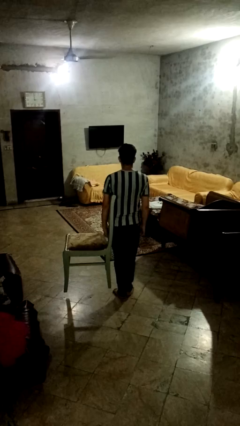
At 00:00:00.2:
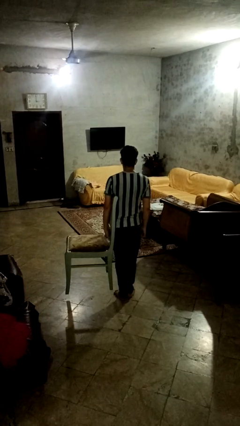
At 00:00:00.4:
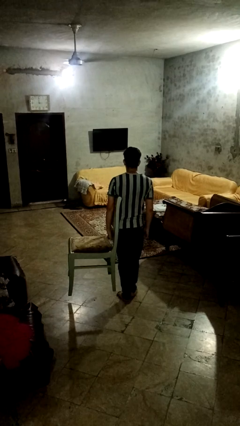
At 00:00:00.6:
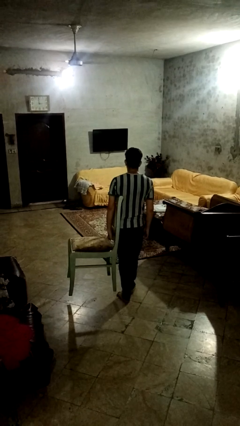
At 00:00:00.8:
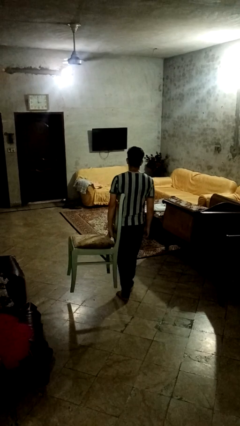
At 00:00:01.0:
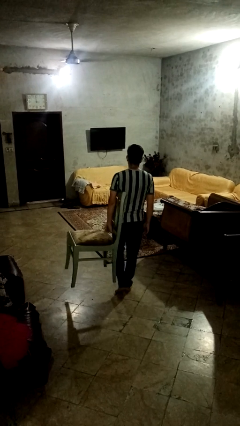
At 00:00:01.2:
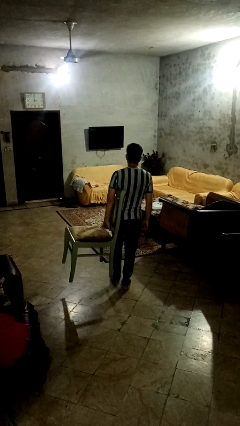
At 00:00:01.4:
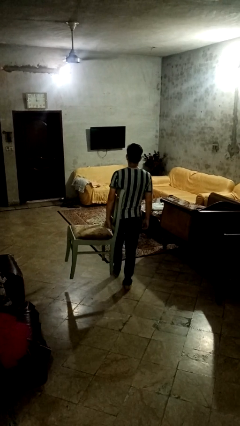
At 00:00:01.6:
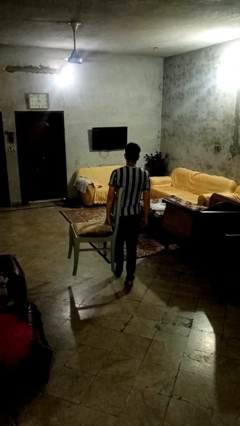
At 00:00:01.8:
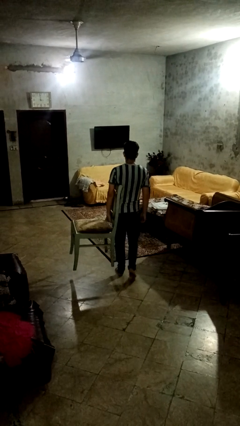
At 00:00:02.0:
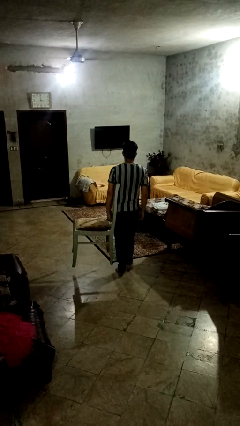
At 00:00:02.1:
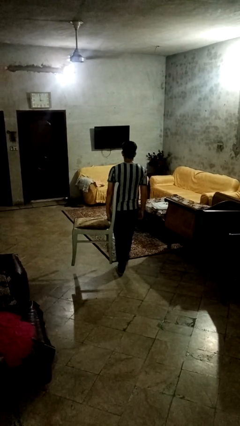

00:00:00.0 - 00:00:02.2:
person carries furniture

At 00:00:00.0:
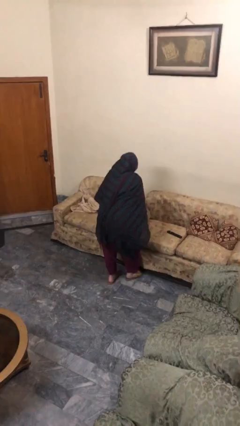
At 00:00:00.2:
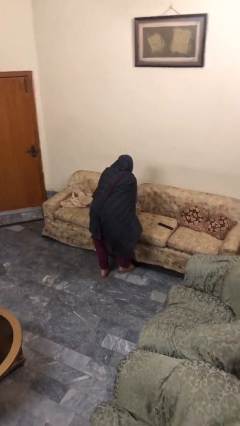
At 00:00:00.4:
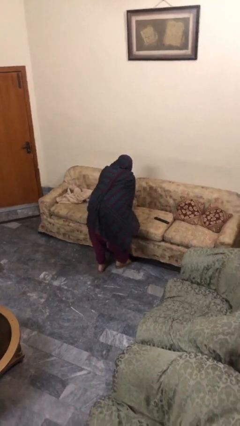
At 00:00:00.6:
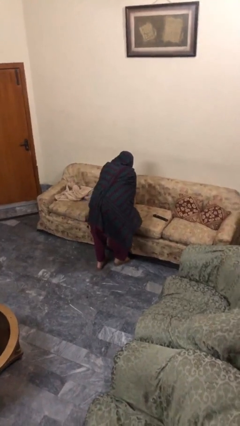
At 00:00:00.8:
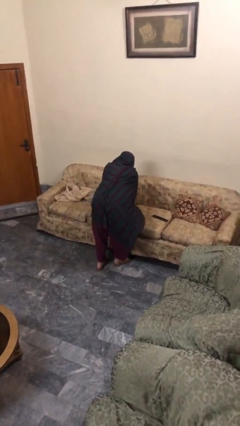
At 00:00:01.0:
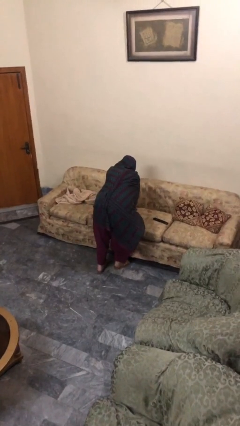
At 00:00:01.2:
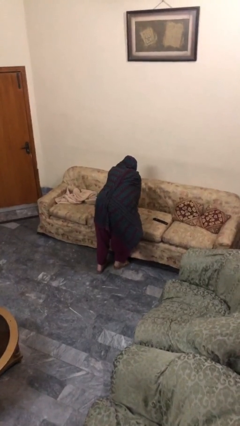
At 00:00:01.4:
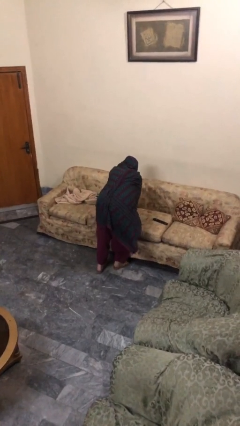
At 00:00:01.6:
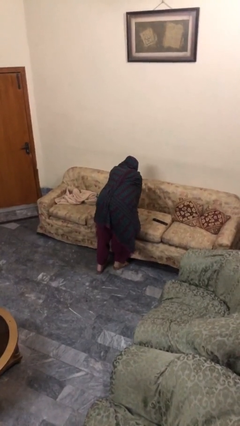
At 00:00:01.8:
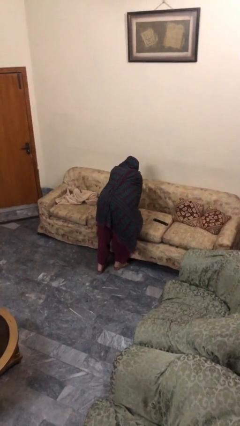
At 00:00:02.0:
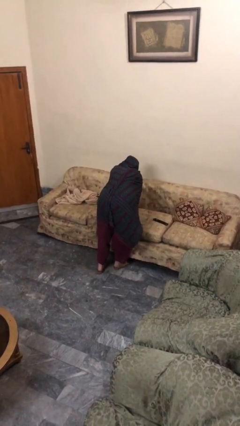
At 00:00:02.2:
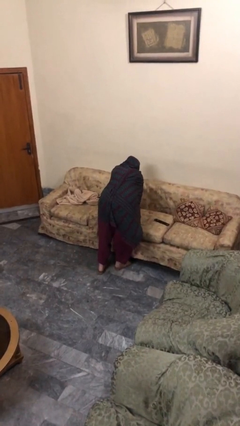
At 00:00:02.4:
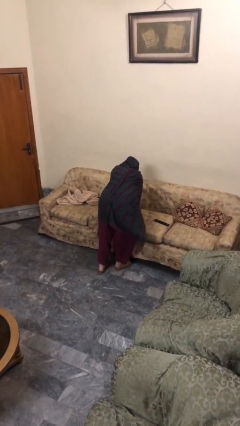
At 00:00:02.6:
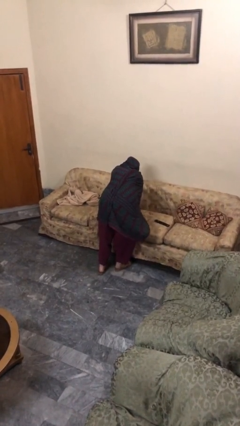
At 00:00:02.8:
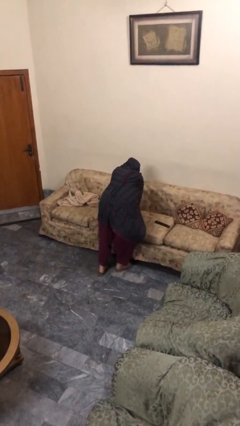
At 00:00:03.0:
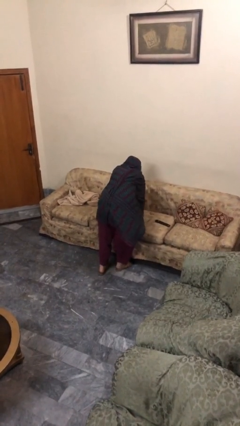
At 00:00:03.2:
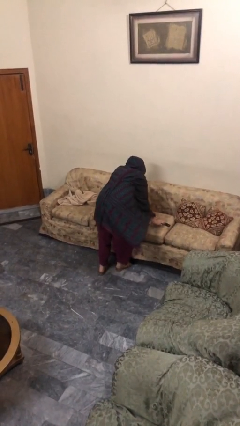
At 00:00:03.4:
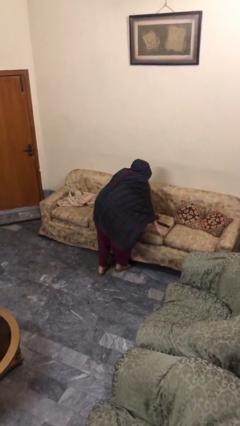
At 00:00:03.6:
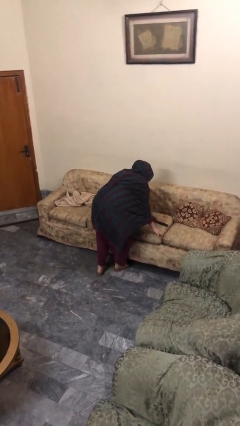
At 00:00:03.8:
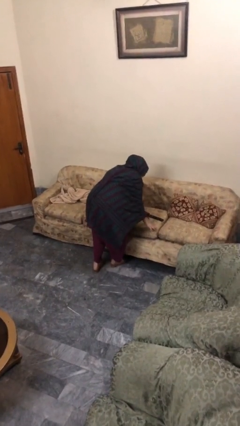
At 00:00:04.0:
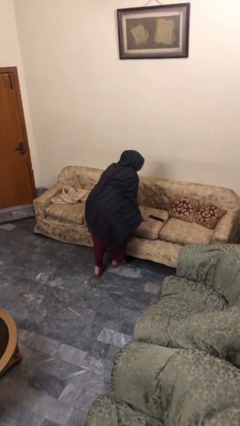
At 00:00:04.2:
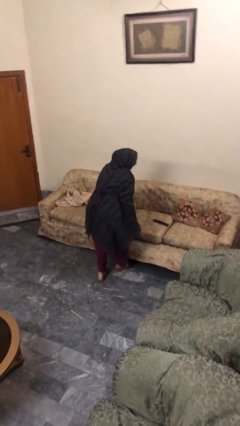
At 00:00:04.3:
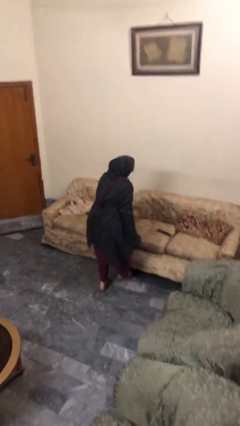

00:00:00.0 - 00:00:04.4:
person searches in couch

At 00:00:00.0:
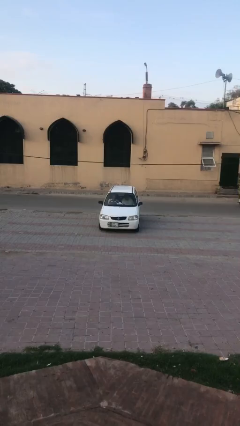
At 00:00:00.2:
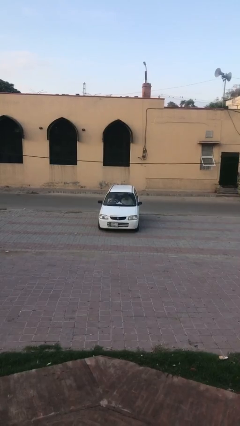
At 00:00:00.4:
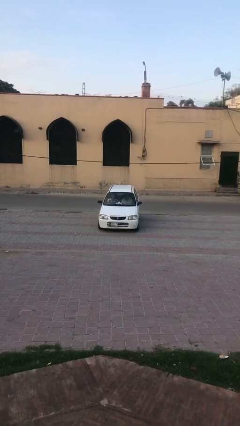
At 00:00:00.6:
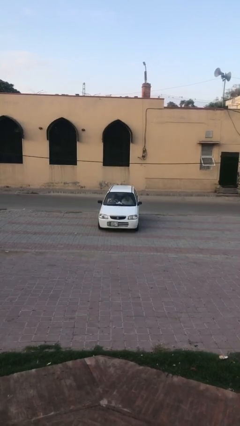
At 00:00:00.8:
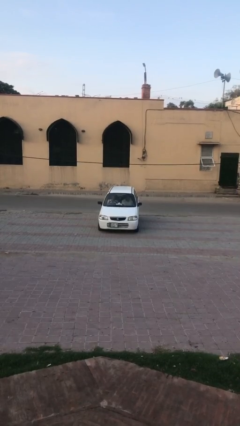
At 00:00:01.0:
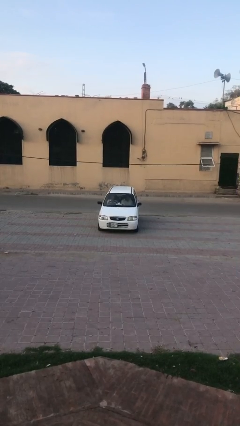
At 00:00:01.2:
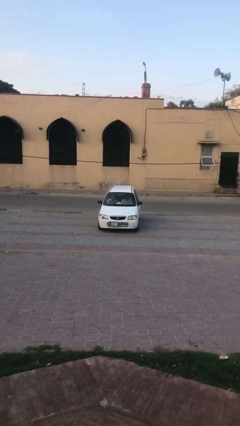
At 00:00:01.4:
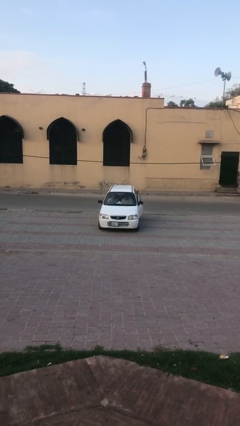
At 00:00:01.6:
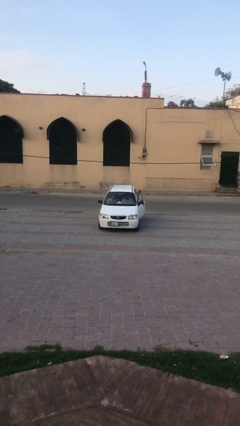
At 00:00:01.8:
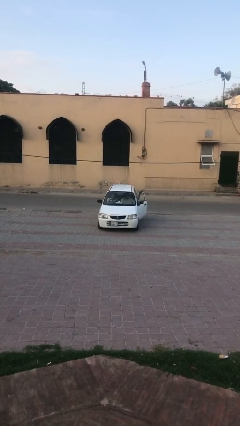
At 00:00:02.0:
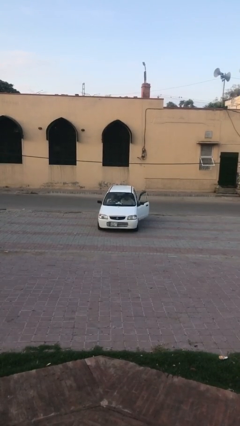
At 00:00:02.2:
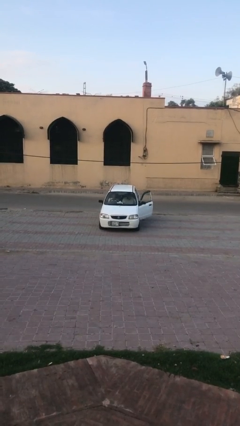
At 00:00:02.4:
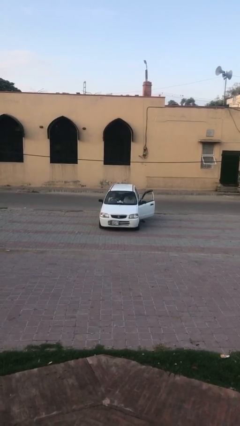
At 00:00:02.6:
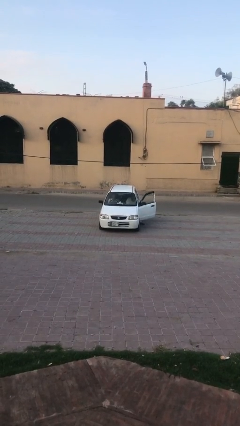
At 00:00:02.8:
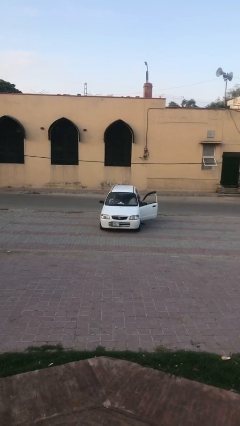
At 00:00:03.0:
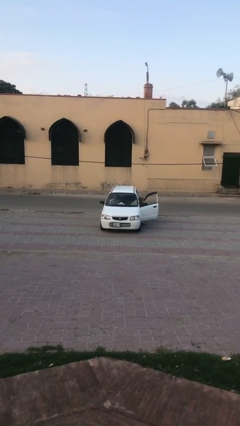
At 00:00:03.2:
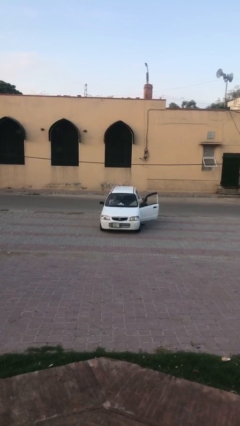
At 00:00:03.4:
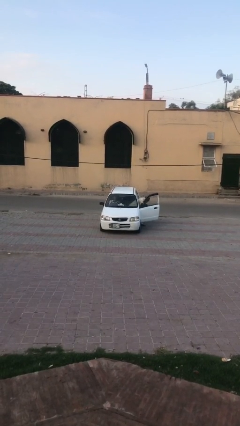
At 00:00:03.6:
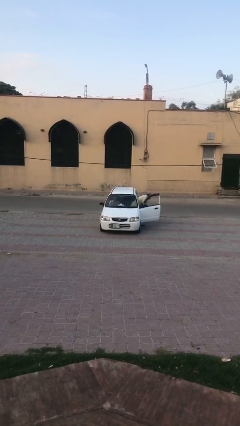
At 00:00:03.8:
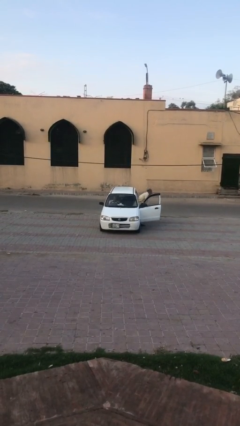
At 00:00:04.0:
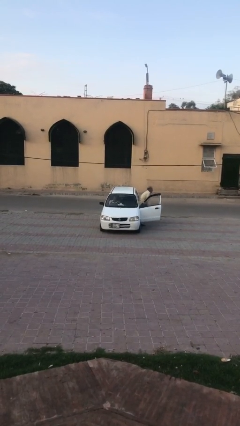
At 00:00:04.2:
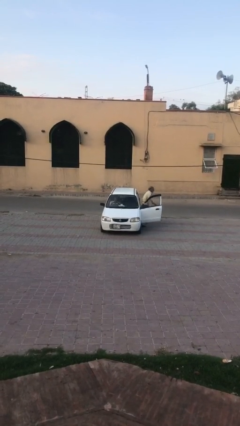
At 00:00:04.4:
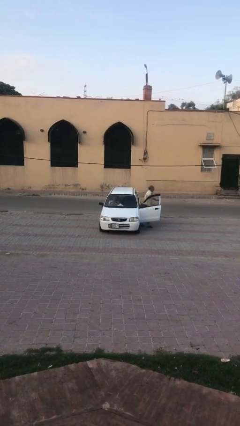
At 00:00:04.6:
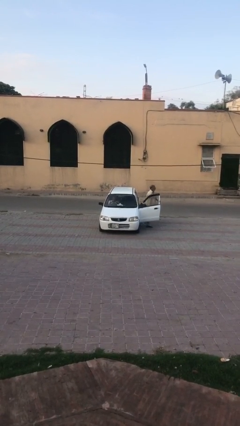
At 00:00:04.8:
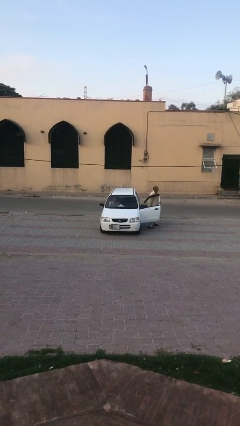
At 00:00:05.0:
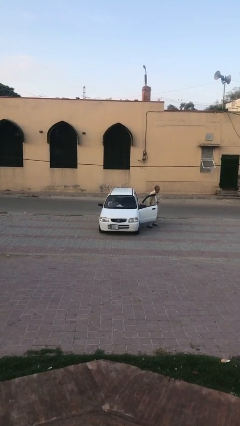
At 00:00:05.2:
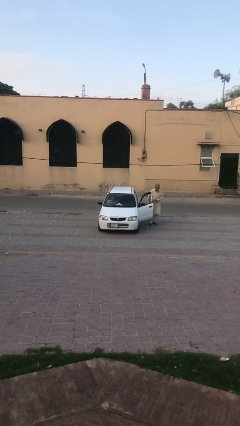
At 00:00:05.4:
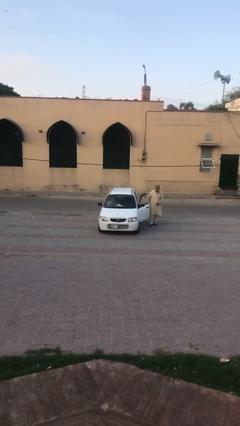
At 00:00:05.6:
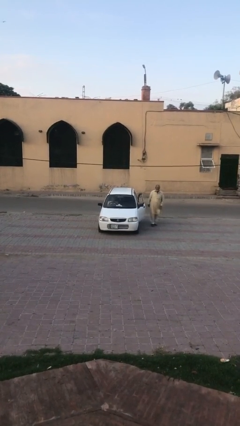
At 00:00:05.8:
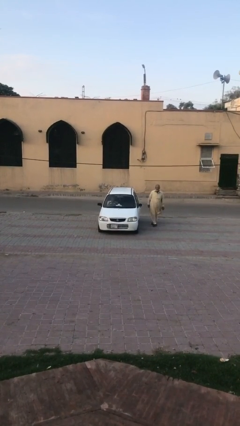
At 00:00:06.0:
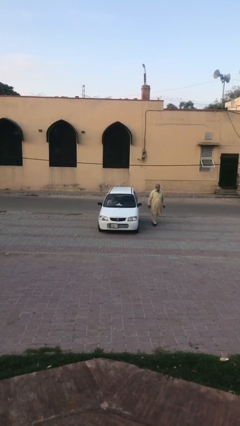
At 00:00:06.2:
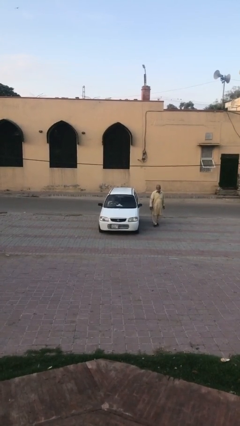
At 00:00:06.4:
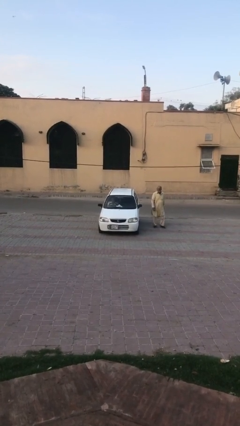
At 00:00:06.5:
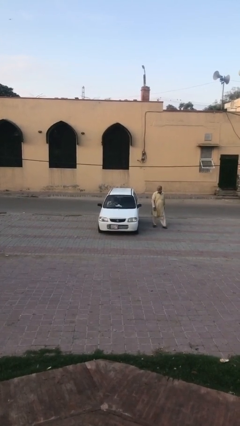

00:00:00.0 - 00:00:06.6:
car drops off person

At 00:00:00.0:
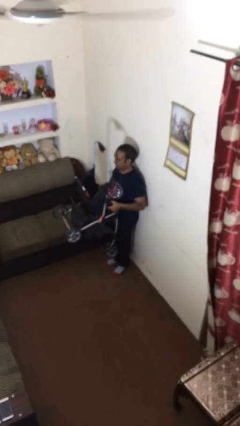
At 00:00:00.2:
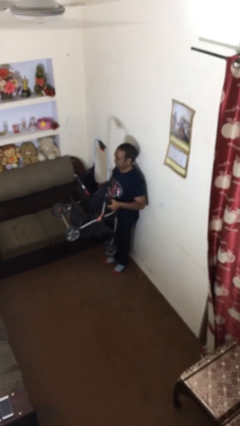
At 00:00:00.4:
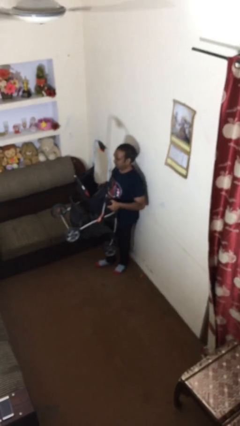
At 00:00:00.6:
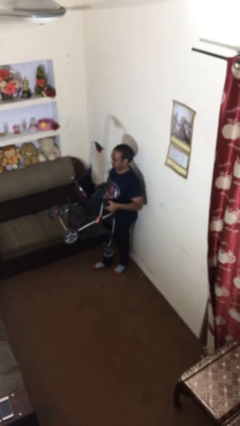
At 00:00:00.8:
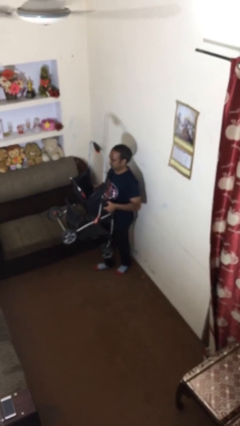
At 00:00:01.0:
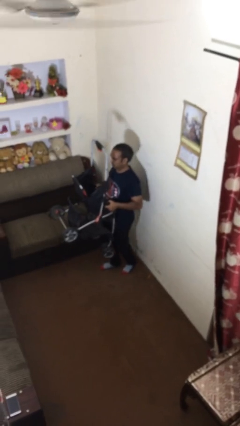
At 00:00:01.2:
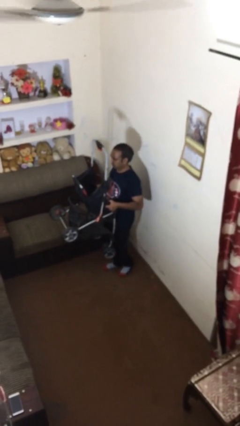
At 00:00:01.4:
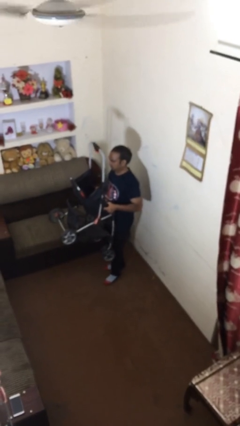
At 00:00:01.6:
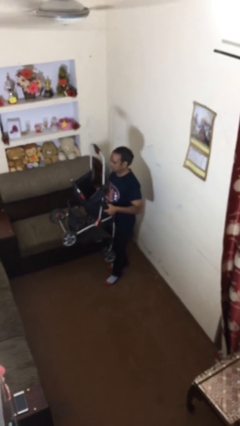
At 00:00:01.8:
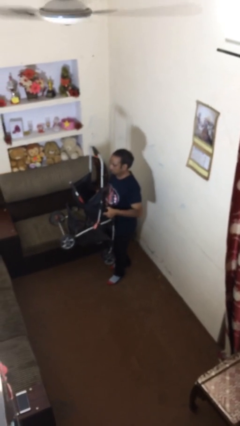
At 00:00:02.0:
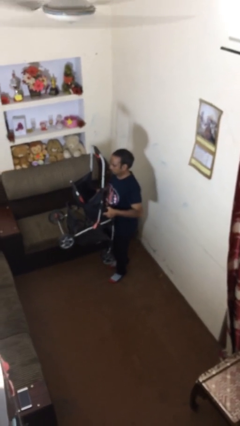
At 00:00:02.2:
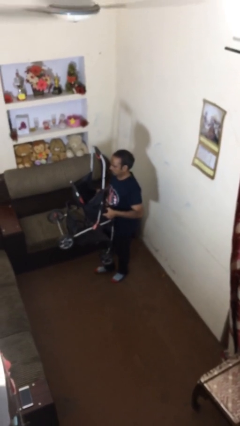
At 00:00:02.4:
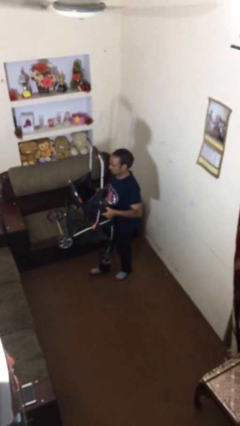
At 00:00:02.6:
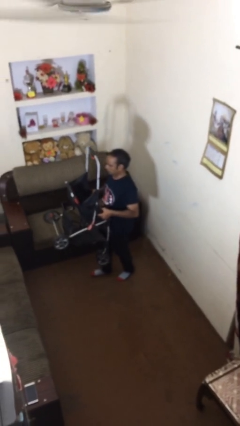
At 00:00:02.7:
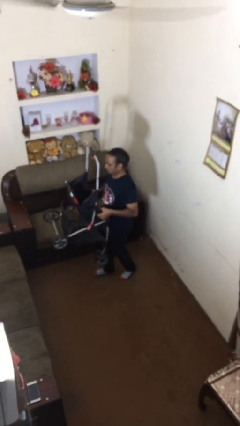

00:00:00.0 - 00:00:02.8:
person carries heavy object

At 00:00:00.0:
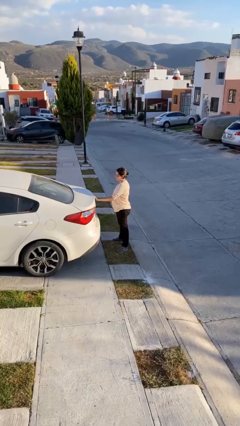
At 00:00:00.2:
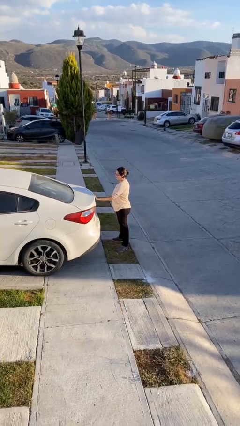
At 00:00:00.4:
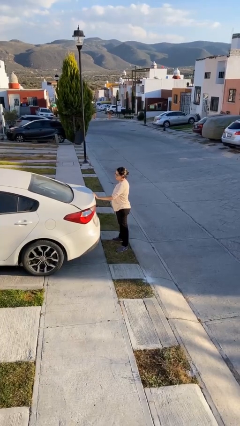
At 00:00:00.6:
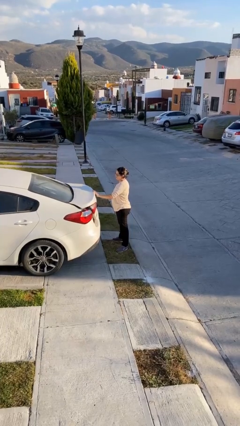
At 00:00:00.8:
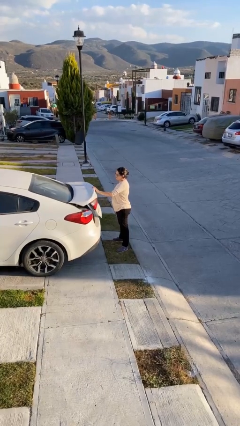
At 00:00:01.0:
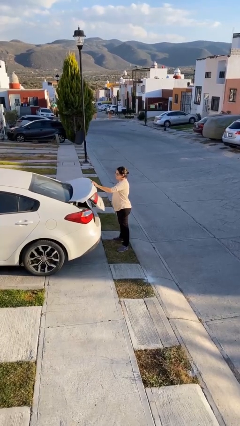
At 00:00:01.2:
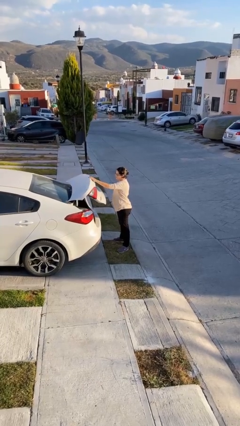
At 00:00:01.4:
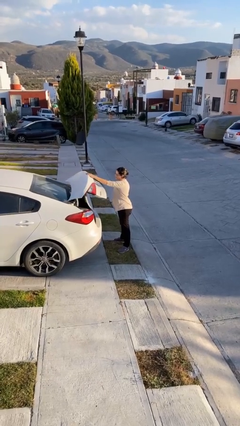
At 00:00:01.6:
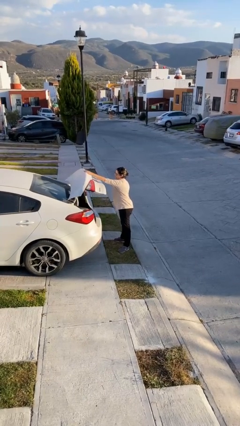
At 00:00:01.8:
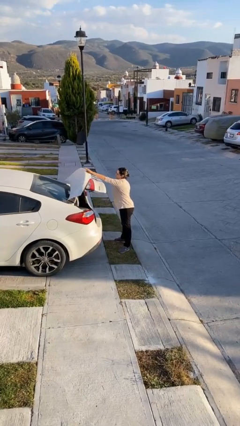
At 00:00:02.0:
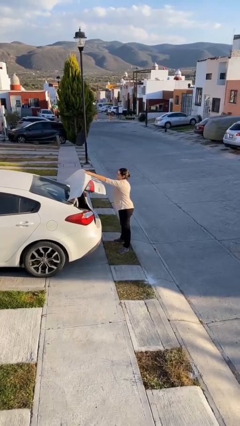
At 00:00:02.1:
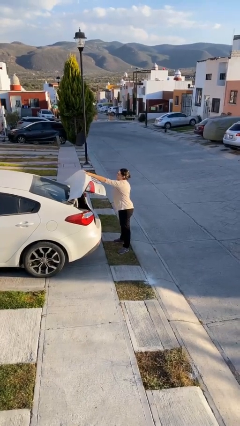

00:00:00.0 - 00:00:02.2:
person opens car trunk
